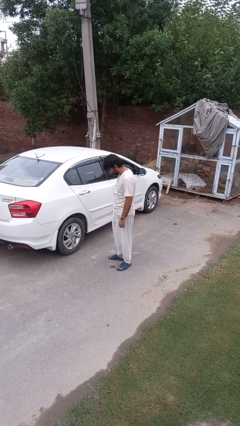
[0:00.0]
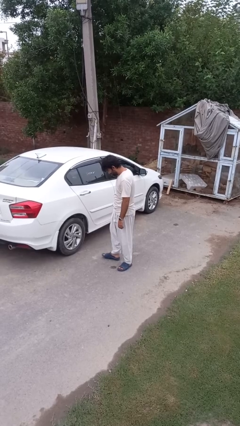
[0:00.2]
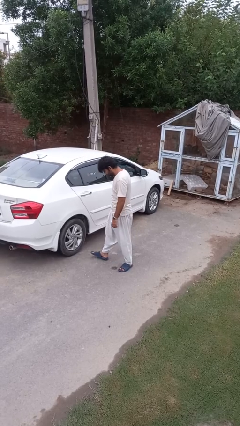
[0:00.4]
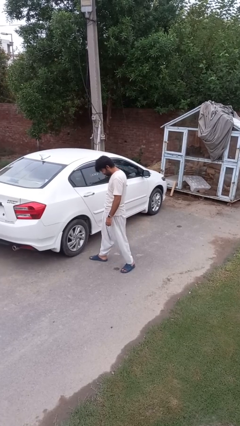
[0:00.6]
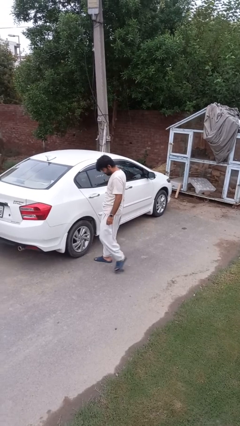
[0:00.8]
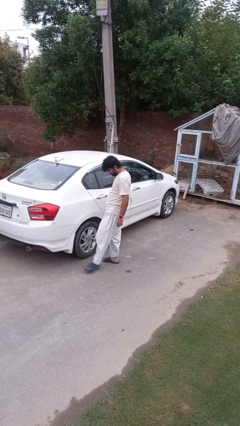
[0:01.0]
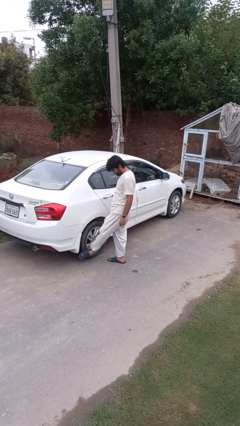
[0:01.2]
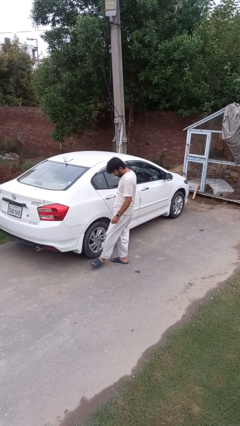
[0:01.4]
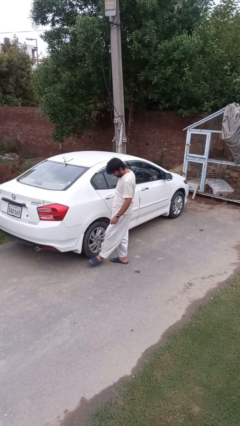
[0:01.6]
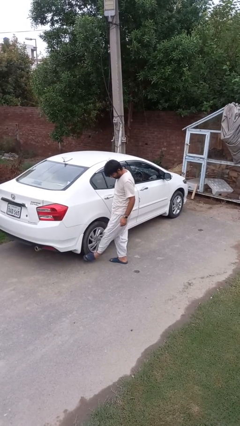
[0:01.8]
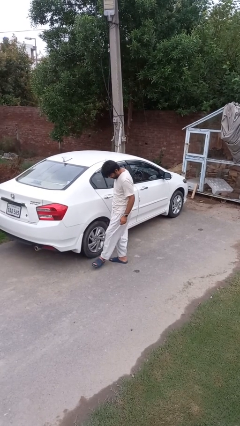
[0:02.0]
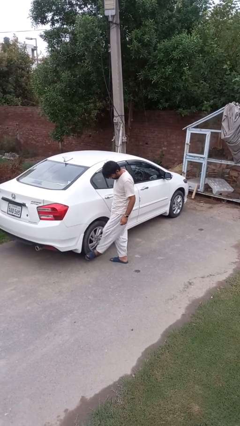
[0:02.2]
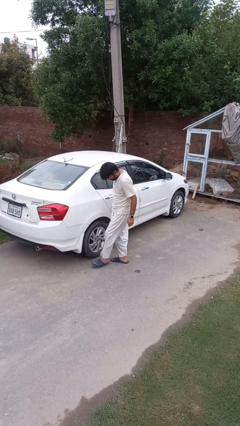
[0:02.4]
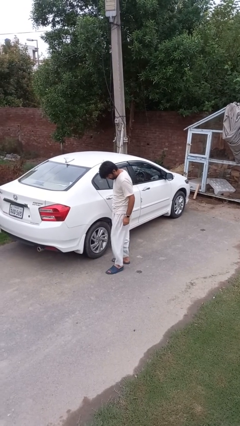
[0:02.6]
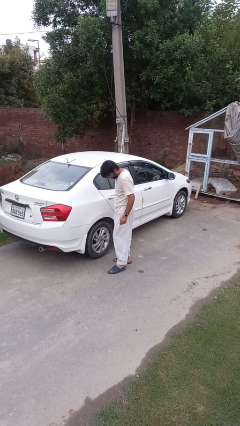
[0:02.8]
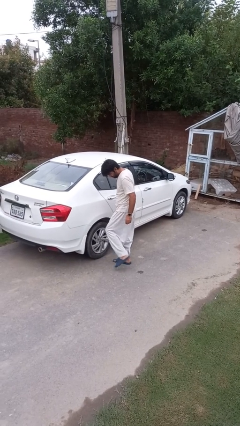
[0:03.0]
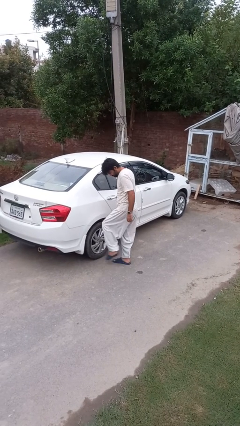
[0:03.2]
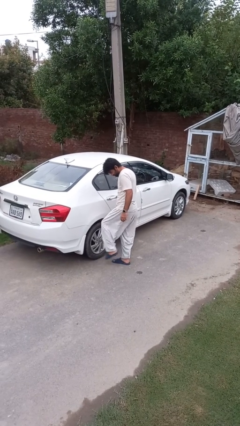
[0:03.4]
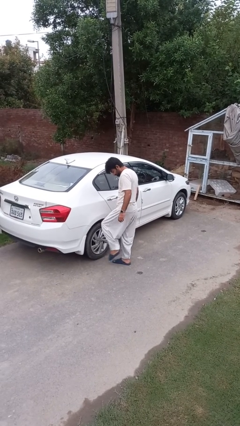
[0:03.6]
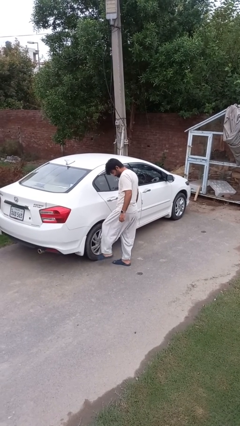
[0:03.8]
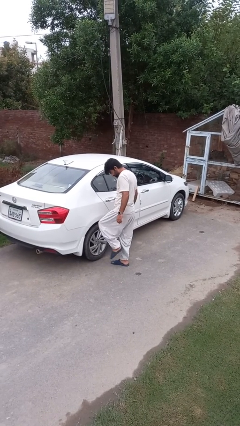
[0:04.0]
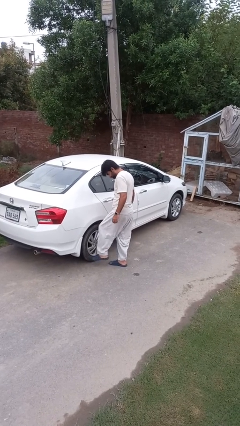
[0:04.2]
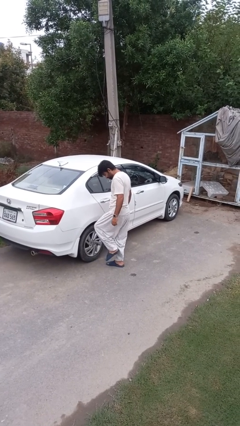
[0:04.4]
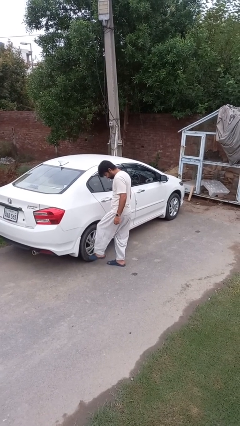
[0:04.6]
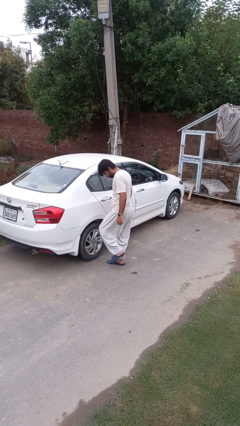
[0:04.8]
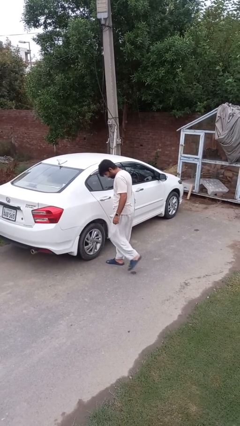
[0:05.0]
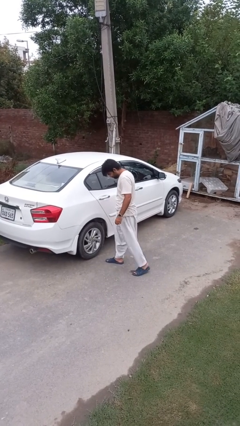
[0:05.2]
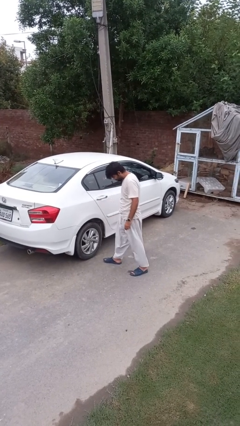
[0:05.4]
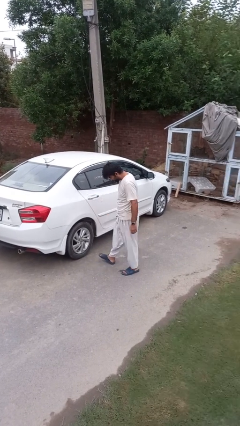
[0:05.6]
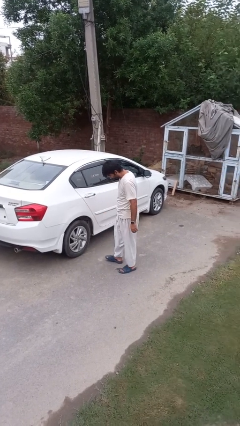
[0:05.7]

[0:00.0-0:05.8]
person kicks car tires

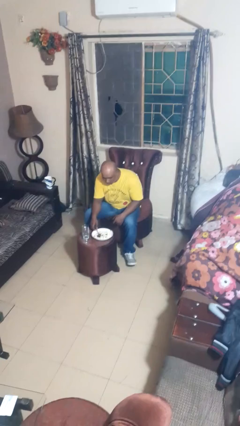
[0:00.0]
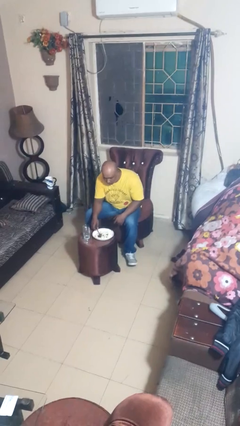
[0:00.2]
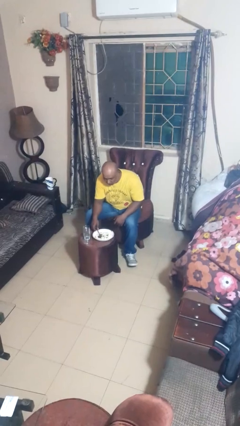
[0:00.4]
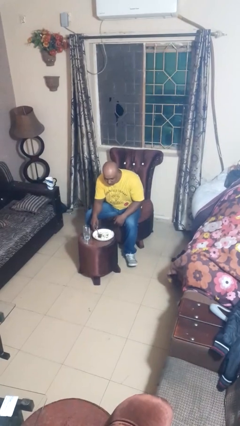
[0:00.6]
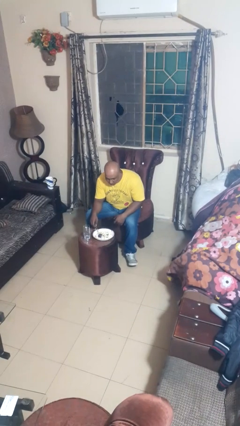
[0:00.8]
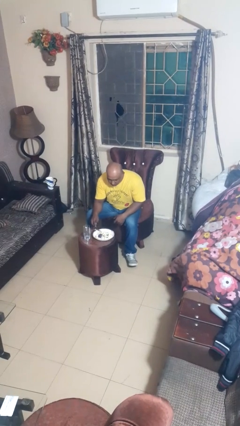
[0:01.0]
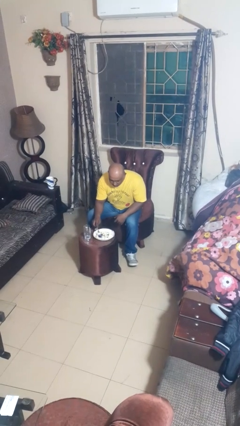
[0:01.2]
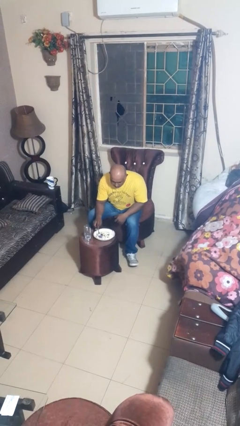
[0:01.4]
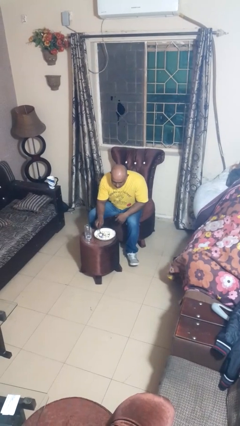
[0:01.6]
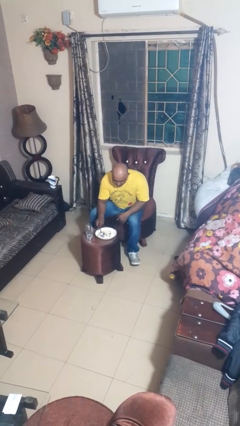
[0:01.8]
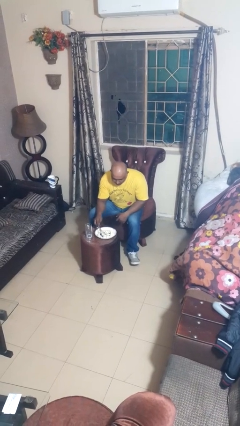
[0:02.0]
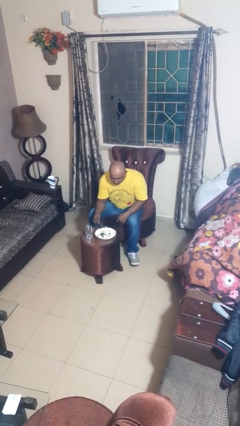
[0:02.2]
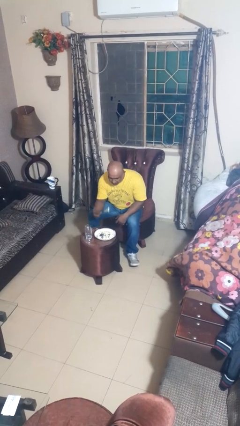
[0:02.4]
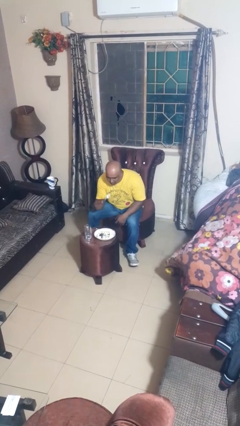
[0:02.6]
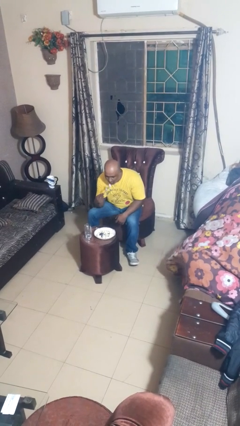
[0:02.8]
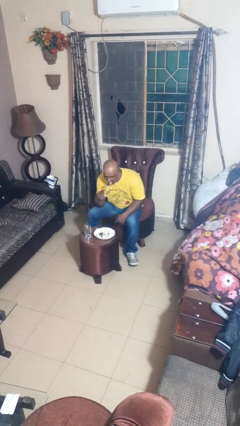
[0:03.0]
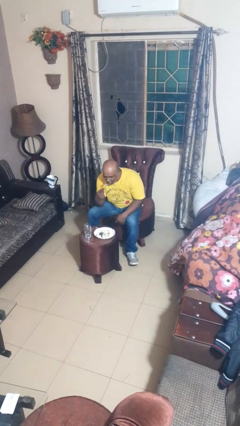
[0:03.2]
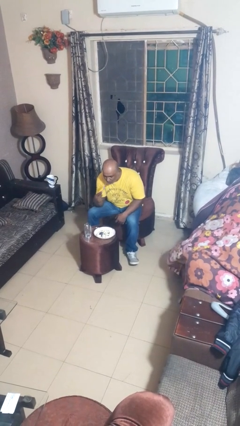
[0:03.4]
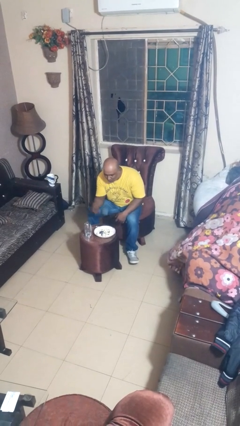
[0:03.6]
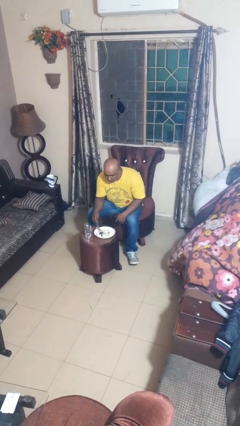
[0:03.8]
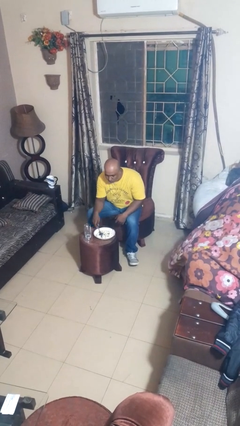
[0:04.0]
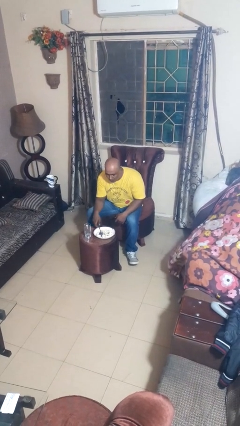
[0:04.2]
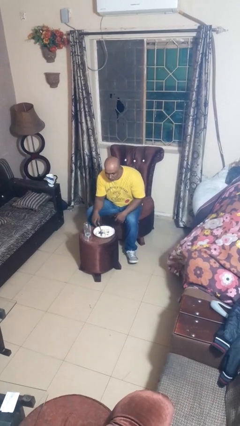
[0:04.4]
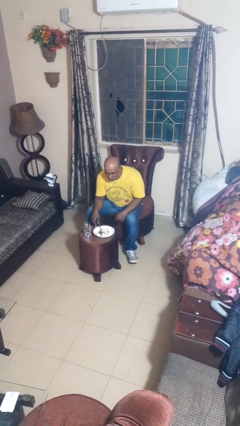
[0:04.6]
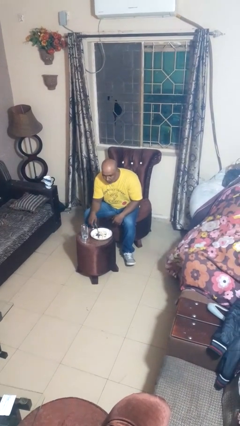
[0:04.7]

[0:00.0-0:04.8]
person eats with utensil

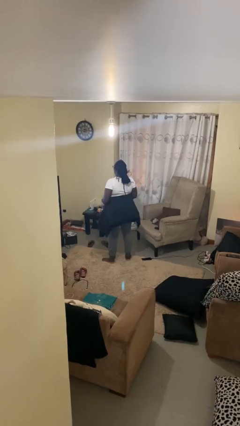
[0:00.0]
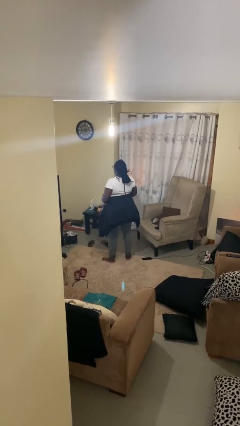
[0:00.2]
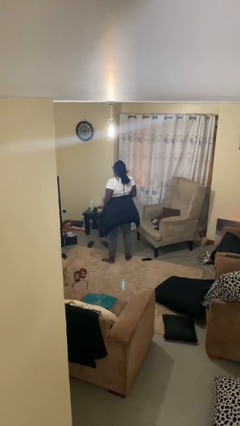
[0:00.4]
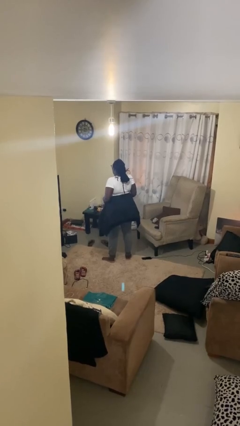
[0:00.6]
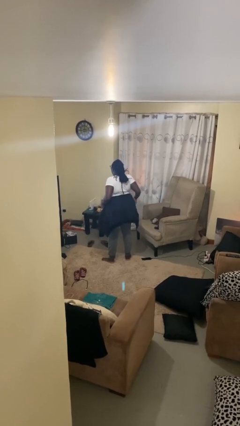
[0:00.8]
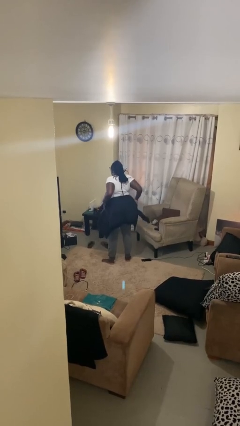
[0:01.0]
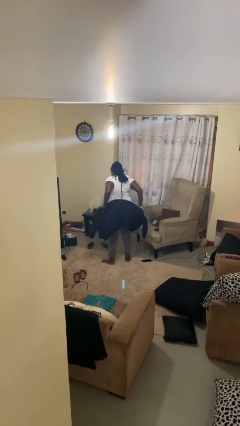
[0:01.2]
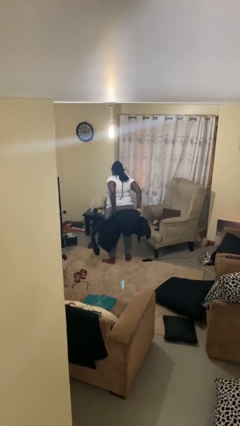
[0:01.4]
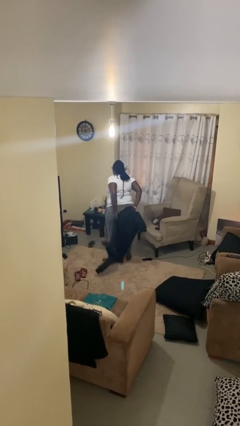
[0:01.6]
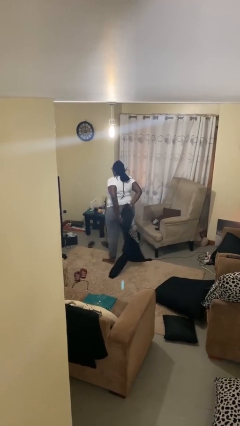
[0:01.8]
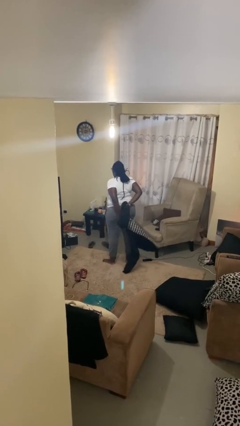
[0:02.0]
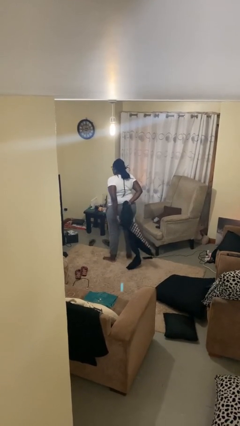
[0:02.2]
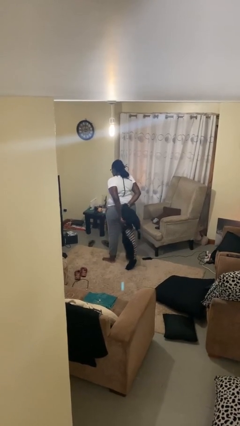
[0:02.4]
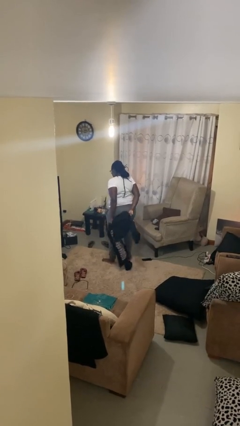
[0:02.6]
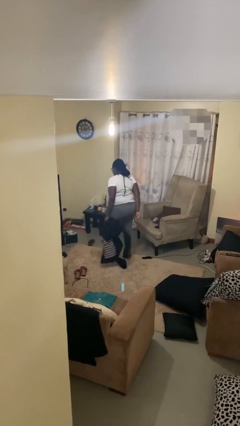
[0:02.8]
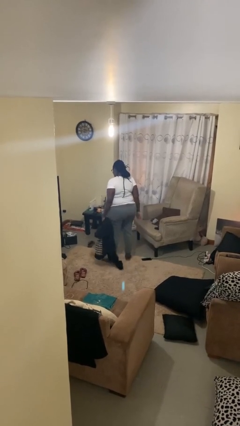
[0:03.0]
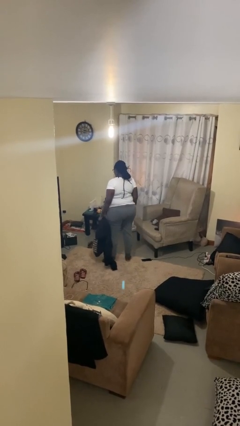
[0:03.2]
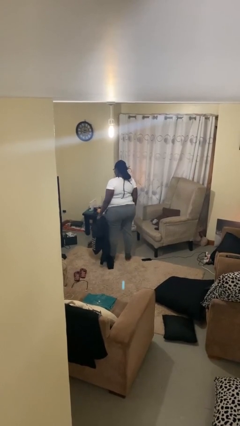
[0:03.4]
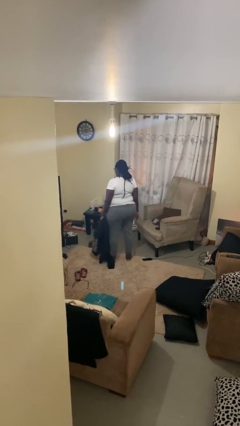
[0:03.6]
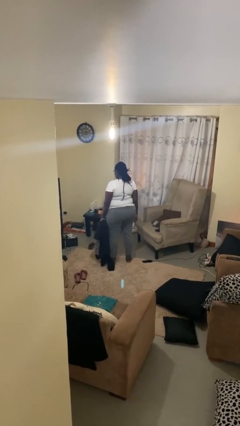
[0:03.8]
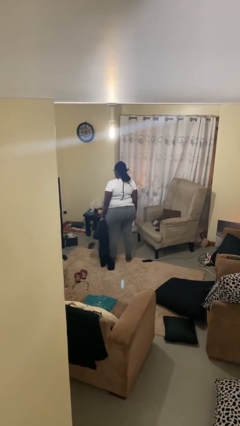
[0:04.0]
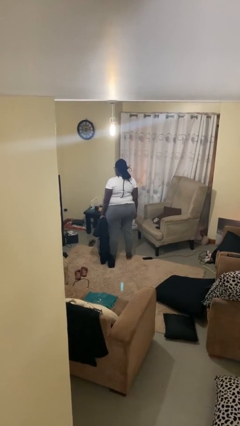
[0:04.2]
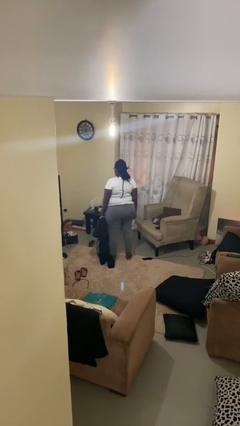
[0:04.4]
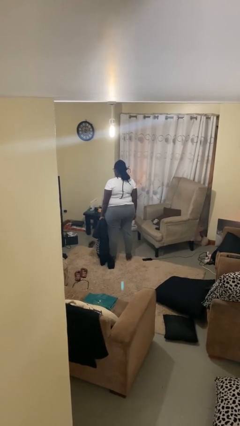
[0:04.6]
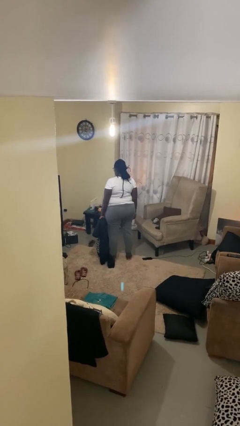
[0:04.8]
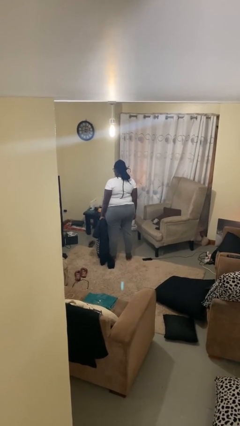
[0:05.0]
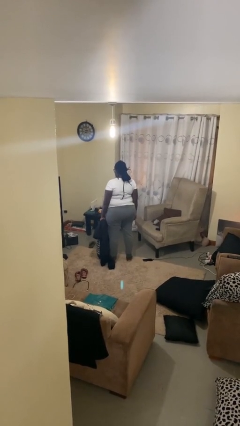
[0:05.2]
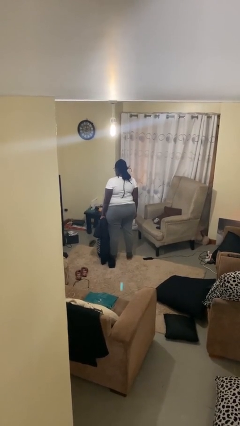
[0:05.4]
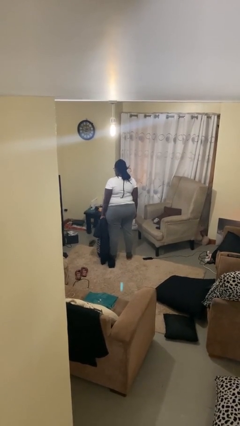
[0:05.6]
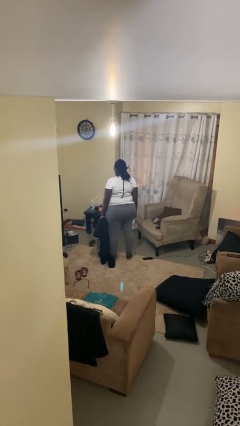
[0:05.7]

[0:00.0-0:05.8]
person unties jacket around waist

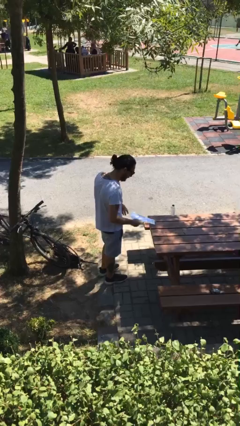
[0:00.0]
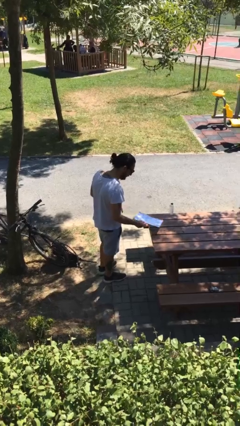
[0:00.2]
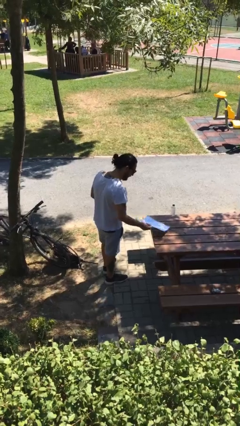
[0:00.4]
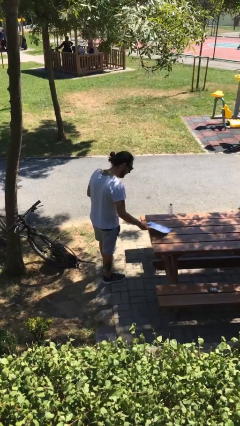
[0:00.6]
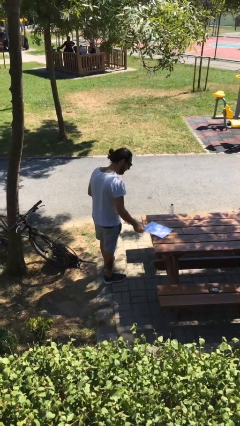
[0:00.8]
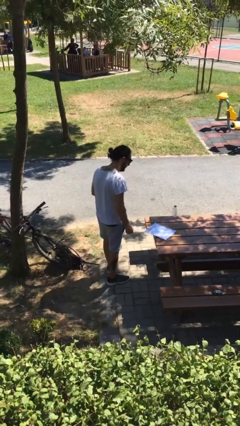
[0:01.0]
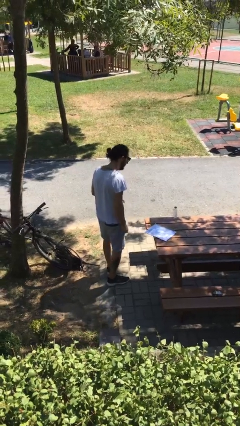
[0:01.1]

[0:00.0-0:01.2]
person puts down object on table
